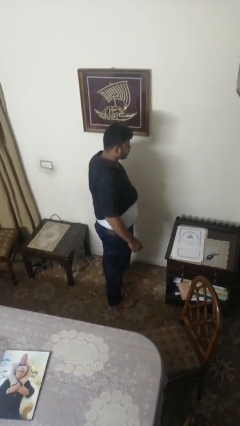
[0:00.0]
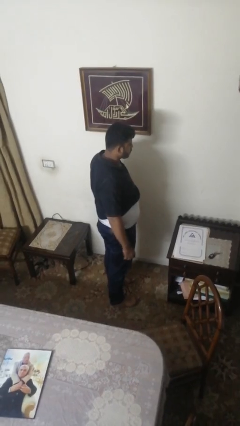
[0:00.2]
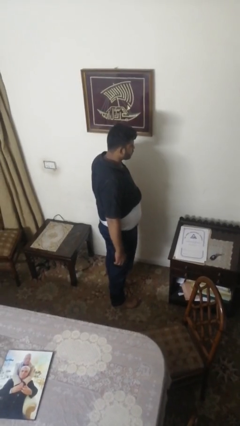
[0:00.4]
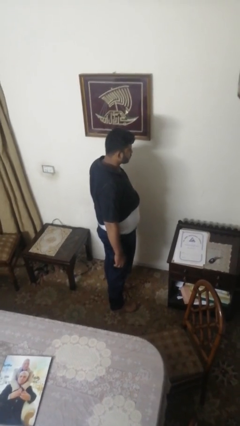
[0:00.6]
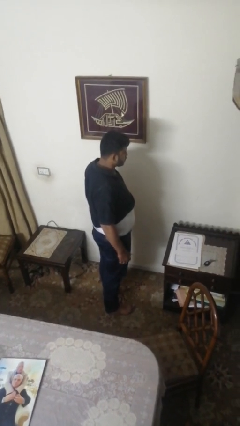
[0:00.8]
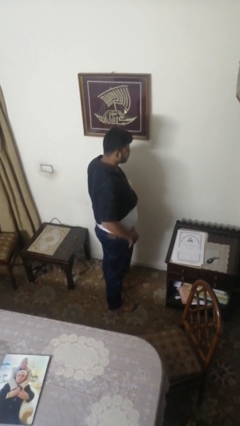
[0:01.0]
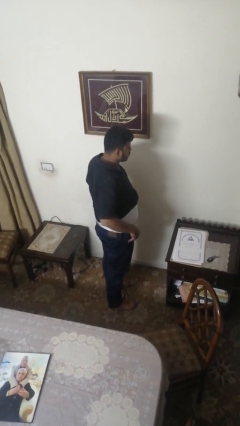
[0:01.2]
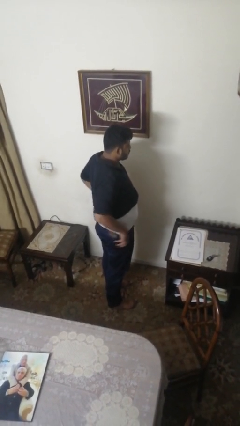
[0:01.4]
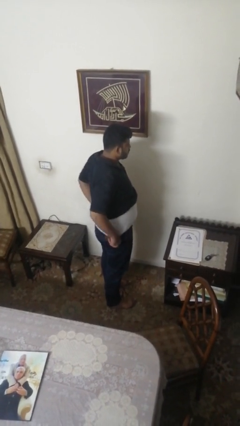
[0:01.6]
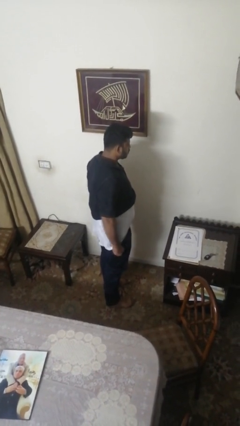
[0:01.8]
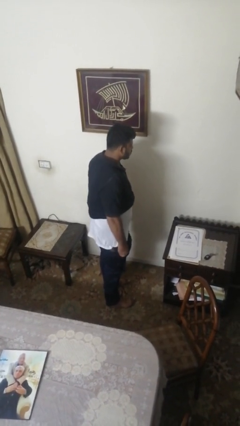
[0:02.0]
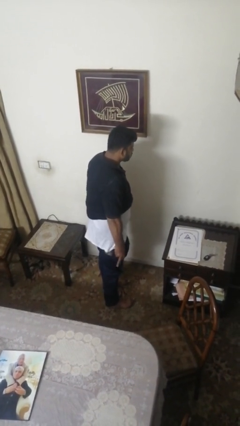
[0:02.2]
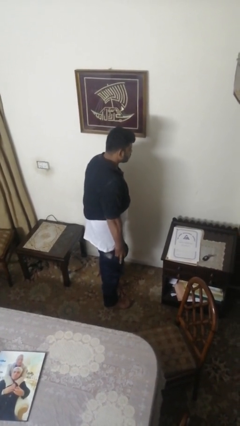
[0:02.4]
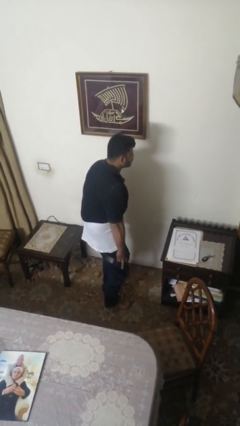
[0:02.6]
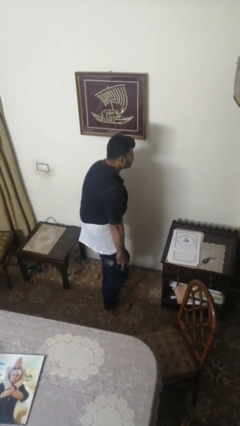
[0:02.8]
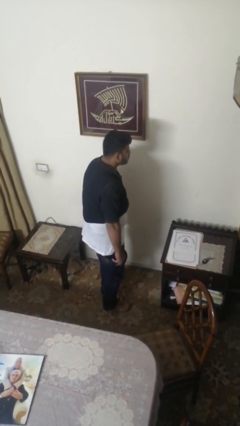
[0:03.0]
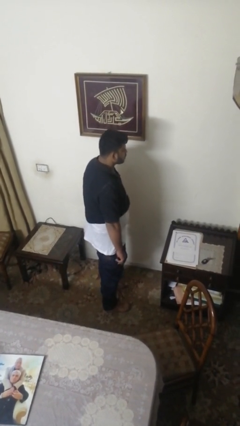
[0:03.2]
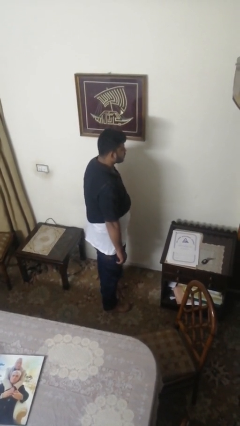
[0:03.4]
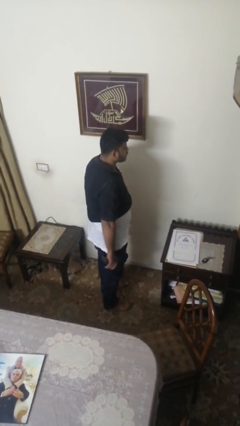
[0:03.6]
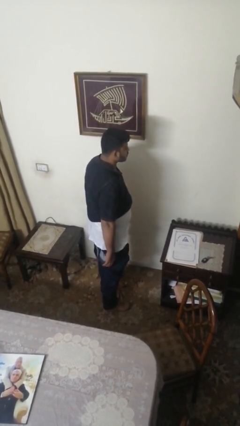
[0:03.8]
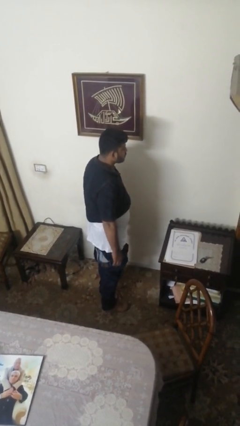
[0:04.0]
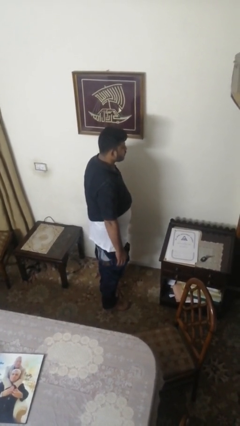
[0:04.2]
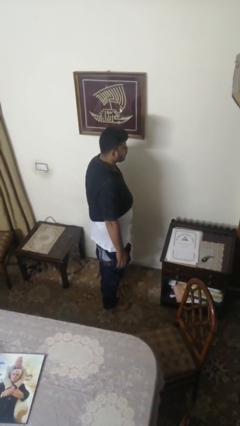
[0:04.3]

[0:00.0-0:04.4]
person takes off pants

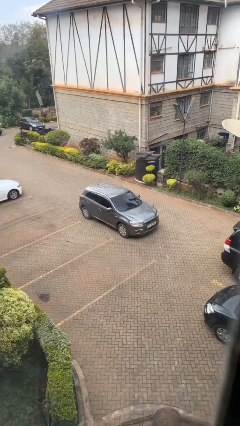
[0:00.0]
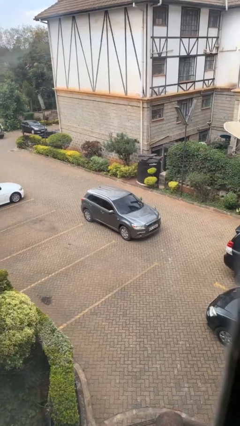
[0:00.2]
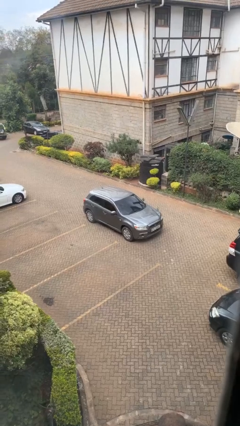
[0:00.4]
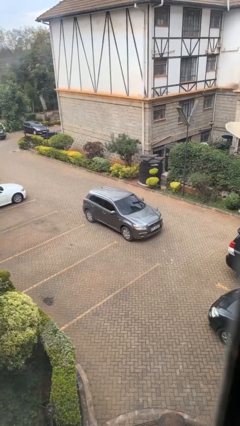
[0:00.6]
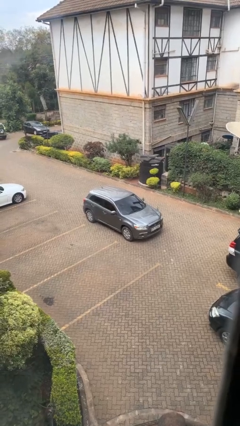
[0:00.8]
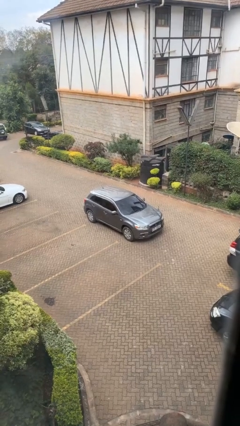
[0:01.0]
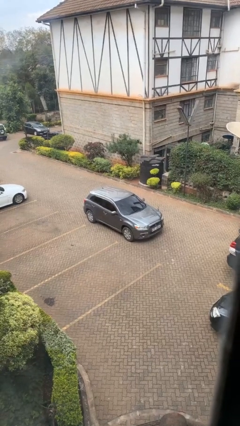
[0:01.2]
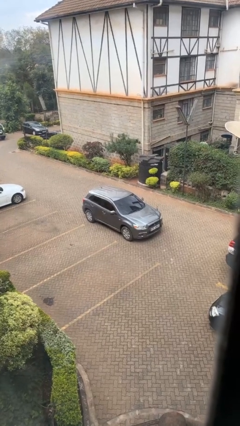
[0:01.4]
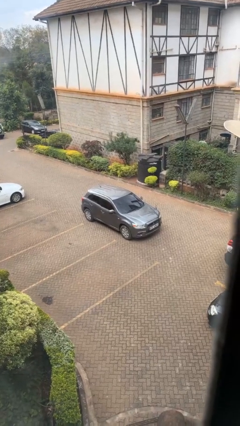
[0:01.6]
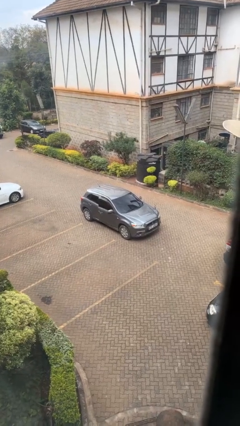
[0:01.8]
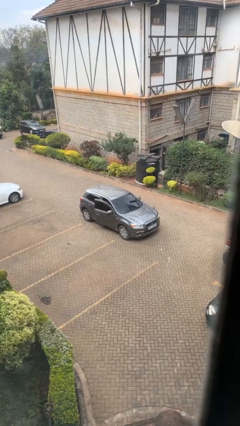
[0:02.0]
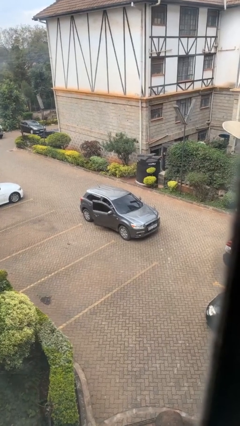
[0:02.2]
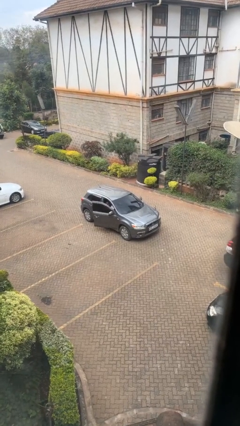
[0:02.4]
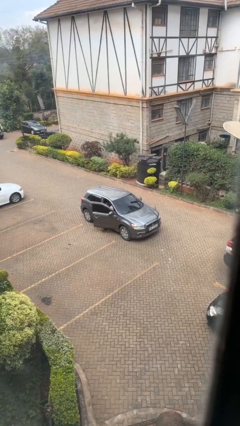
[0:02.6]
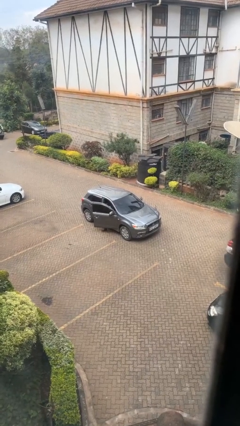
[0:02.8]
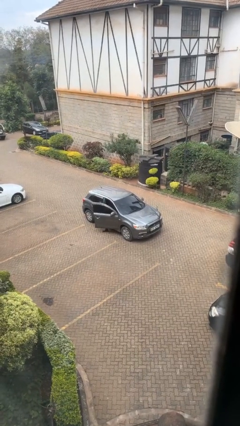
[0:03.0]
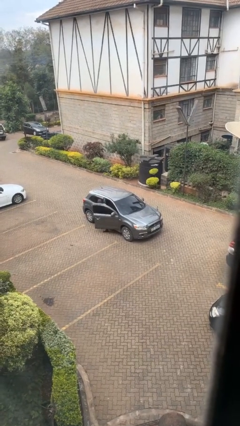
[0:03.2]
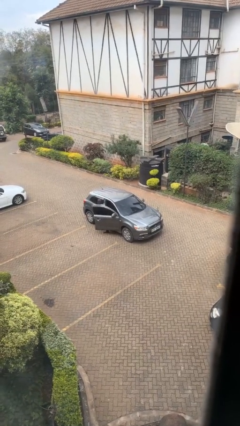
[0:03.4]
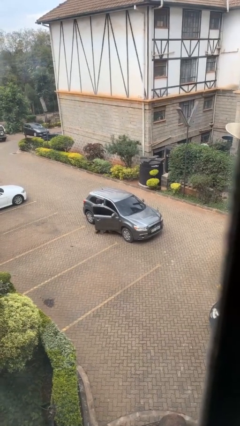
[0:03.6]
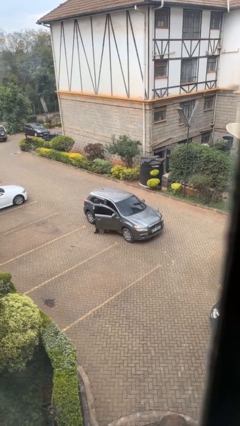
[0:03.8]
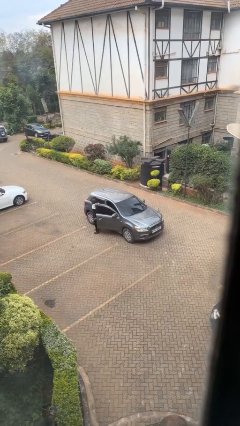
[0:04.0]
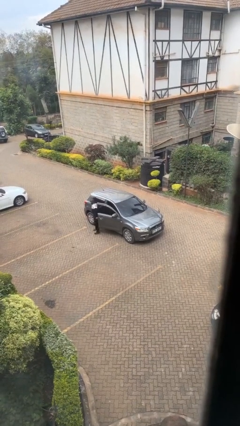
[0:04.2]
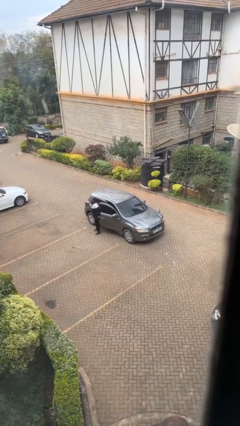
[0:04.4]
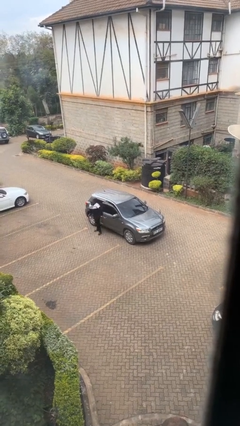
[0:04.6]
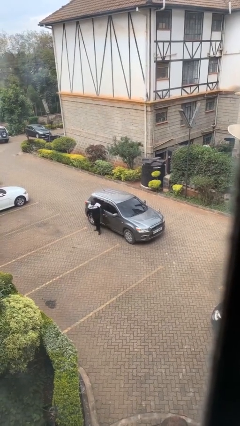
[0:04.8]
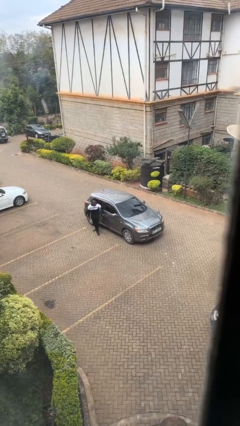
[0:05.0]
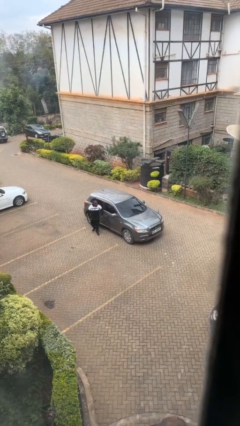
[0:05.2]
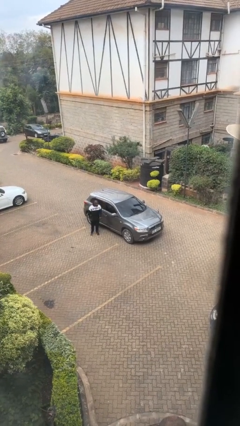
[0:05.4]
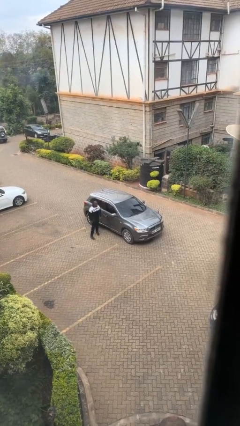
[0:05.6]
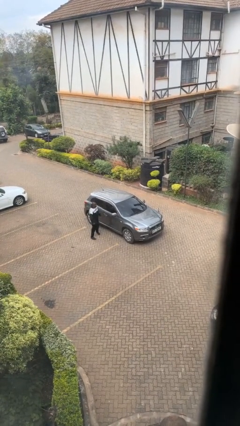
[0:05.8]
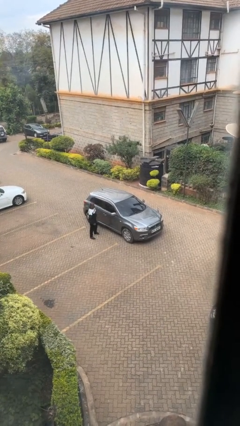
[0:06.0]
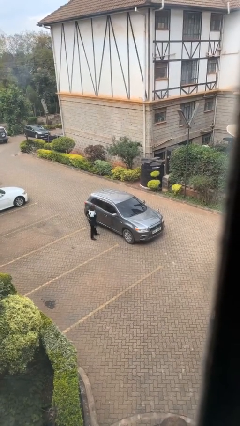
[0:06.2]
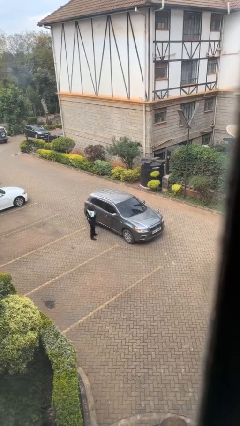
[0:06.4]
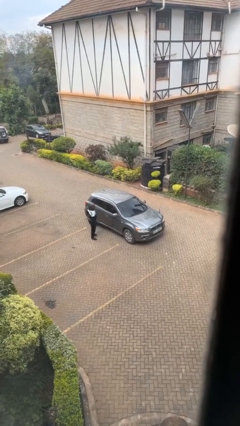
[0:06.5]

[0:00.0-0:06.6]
car drops off person

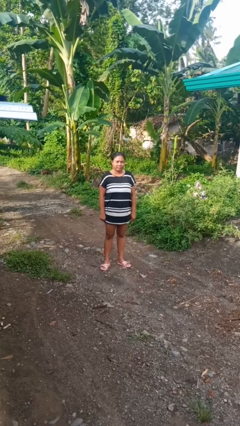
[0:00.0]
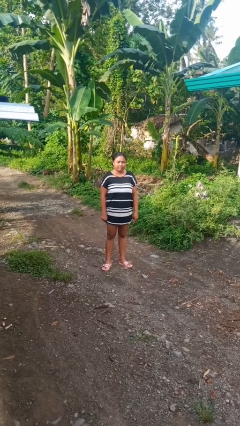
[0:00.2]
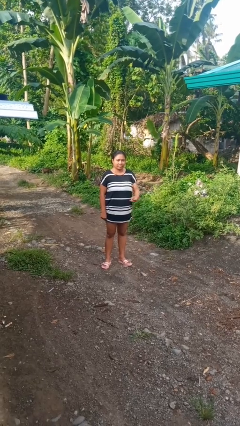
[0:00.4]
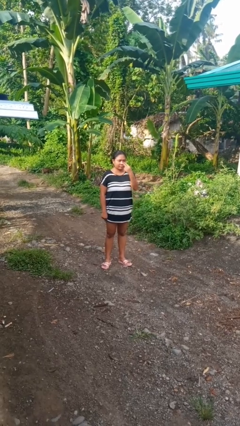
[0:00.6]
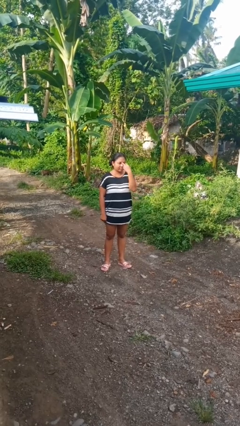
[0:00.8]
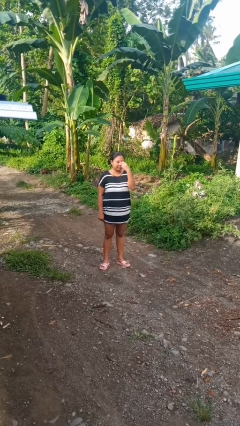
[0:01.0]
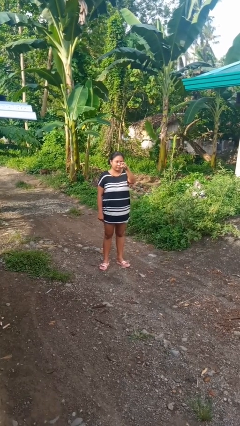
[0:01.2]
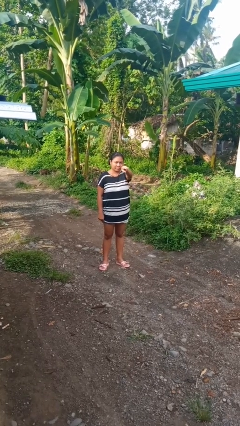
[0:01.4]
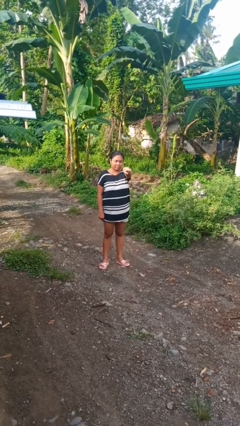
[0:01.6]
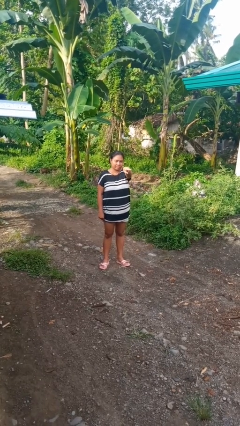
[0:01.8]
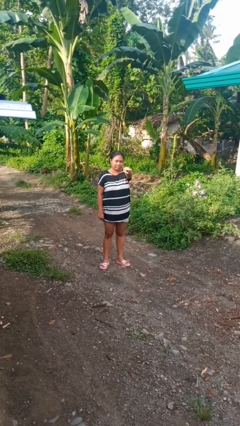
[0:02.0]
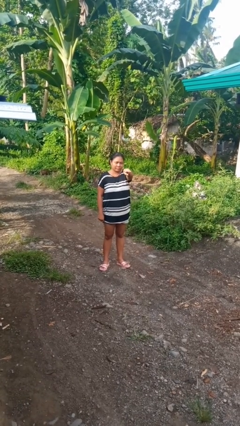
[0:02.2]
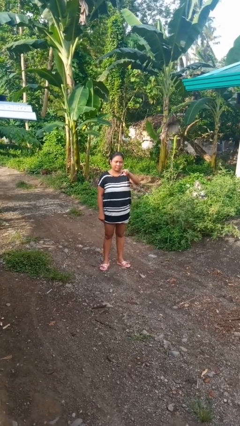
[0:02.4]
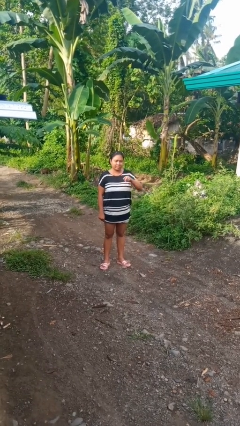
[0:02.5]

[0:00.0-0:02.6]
person gestures watch closely

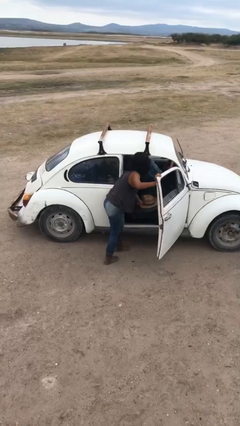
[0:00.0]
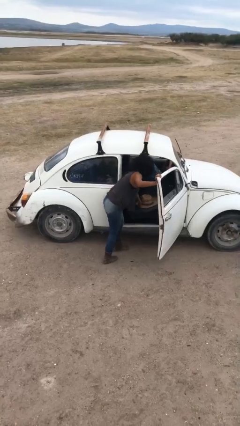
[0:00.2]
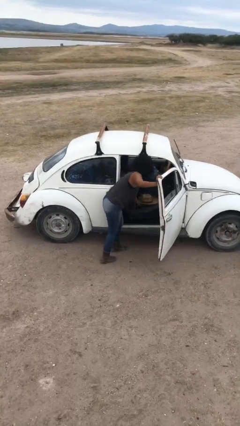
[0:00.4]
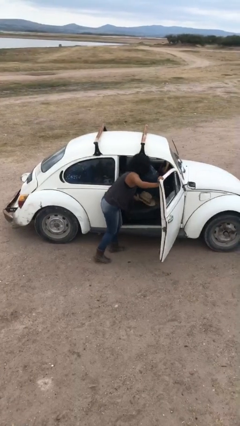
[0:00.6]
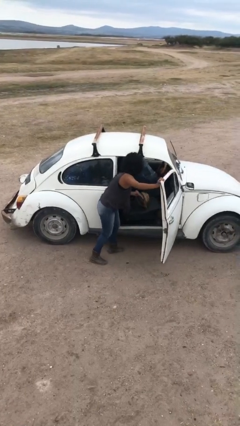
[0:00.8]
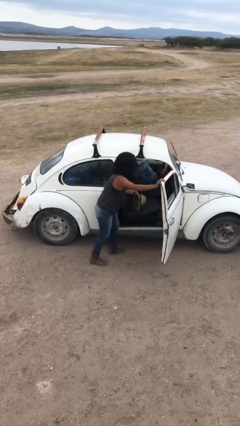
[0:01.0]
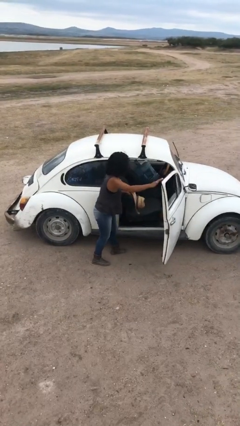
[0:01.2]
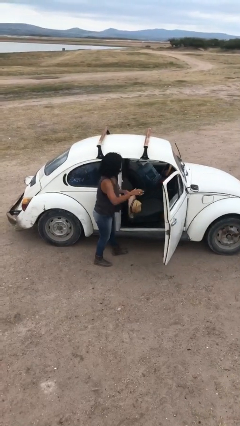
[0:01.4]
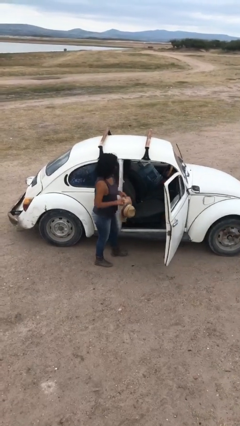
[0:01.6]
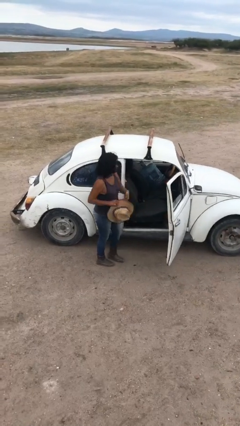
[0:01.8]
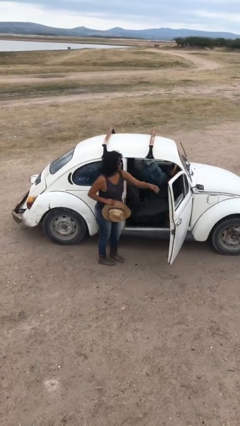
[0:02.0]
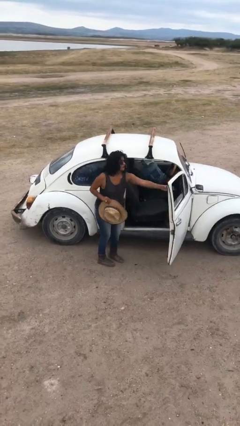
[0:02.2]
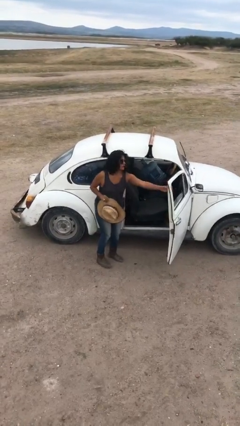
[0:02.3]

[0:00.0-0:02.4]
person unloads car

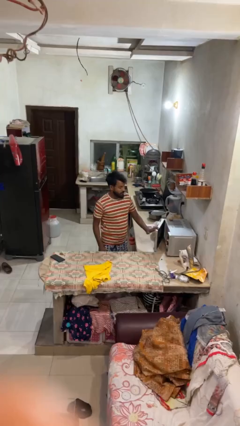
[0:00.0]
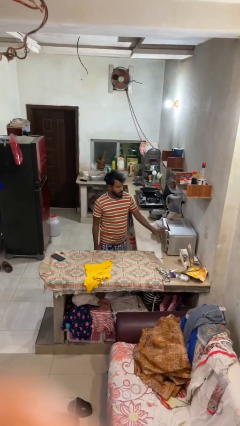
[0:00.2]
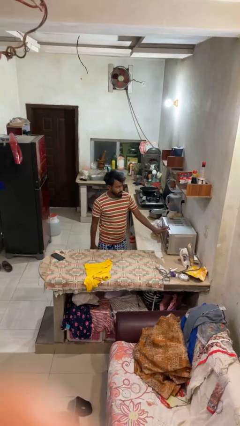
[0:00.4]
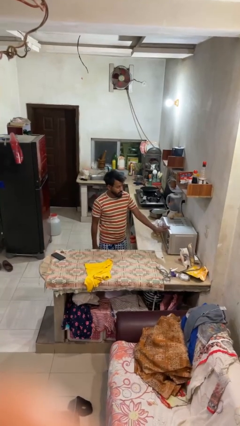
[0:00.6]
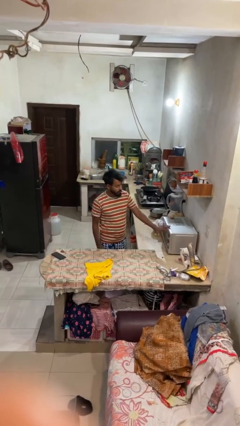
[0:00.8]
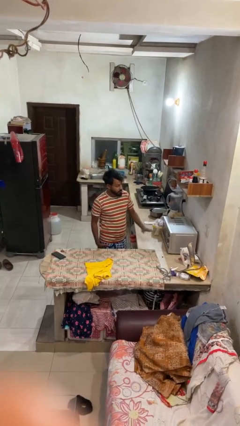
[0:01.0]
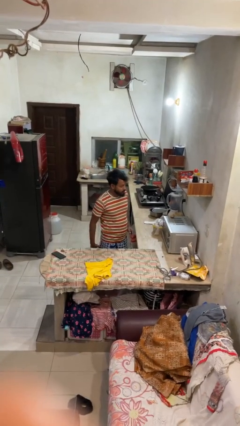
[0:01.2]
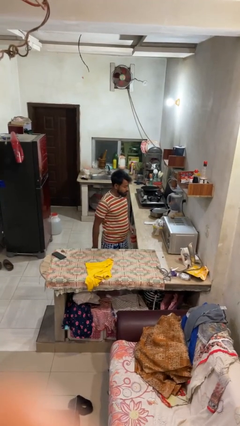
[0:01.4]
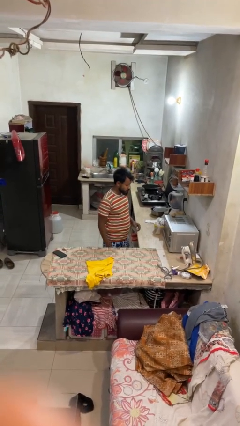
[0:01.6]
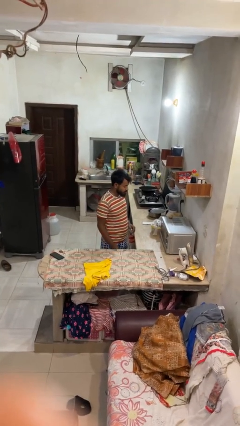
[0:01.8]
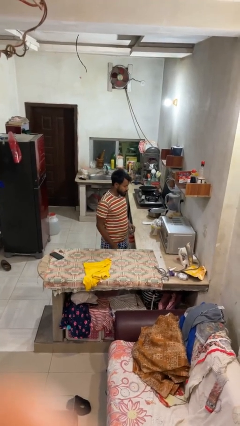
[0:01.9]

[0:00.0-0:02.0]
person closes microwave
